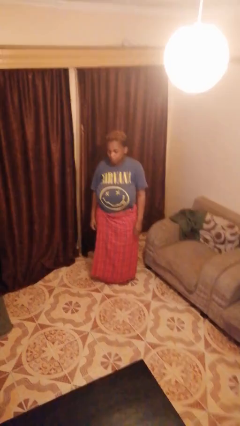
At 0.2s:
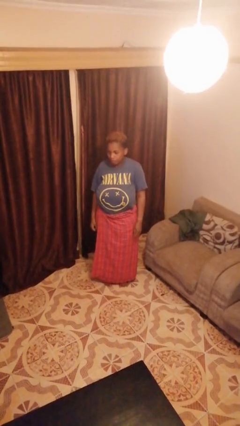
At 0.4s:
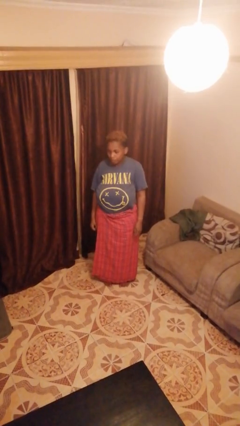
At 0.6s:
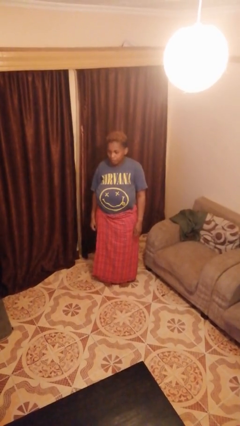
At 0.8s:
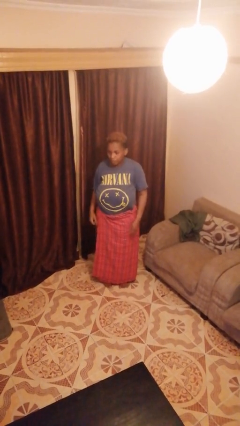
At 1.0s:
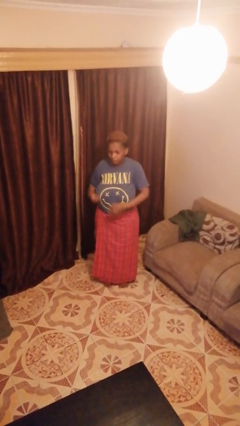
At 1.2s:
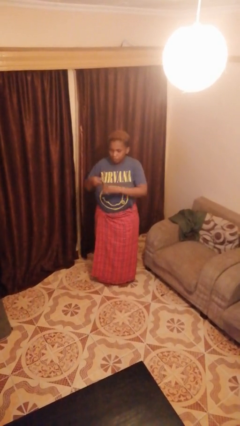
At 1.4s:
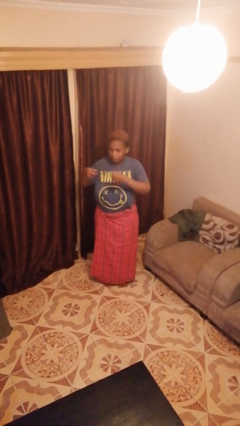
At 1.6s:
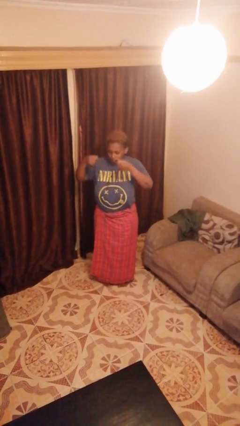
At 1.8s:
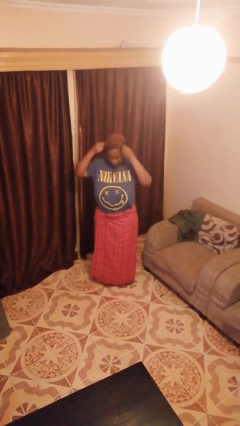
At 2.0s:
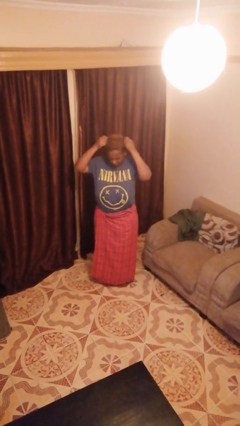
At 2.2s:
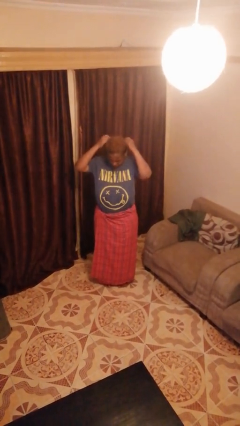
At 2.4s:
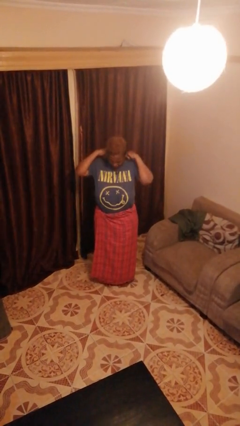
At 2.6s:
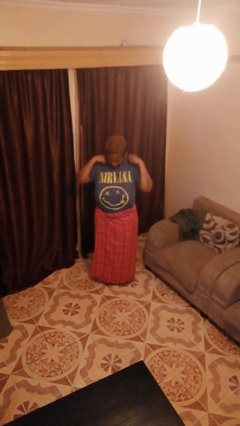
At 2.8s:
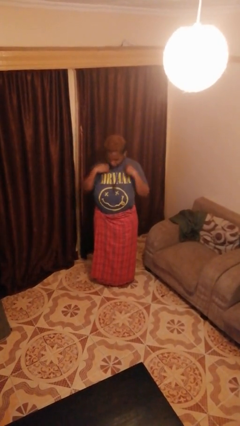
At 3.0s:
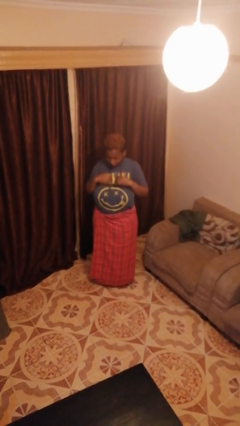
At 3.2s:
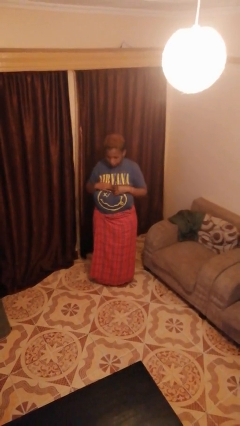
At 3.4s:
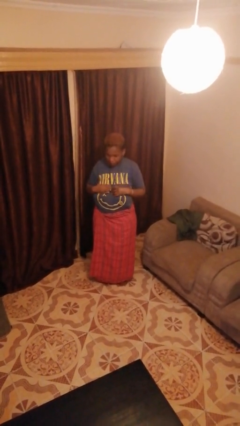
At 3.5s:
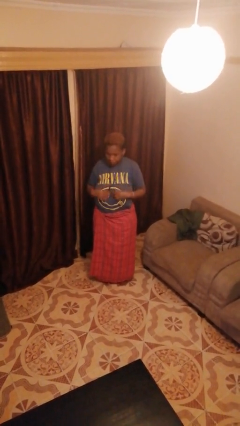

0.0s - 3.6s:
person puts on necklace

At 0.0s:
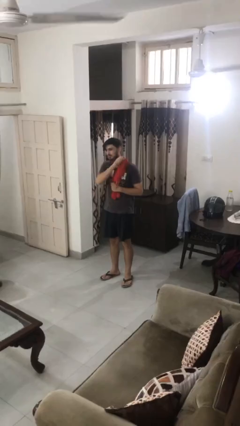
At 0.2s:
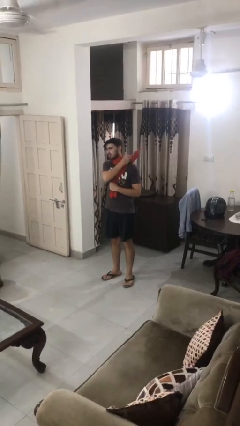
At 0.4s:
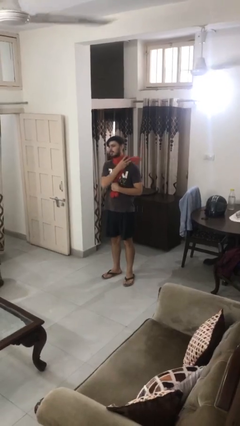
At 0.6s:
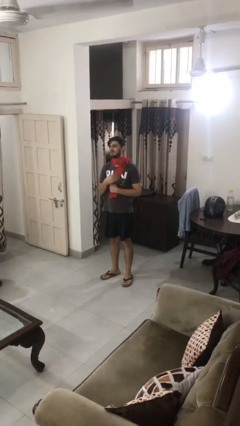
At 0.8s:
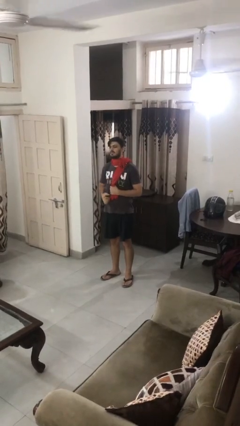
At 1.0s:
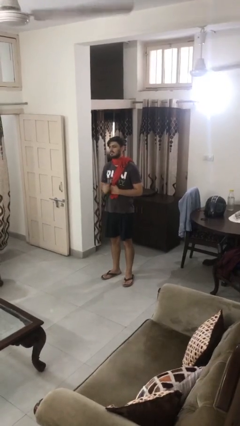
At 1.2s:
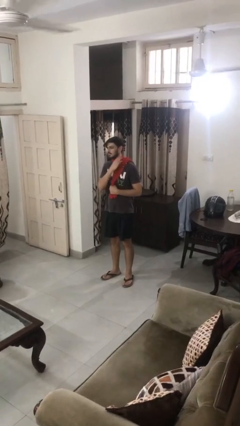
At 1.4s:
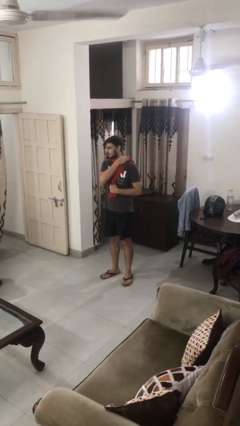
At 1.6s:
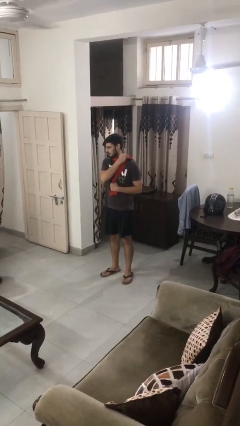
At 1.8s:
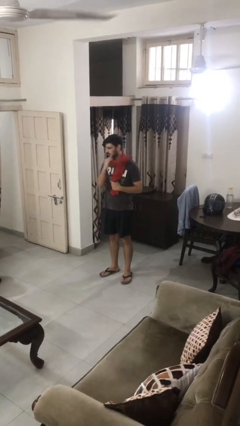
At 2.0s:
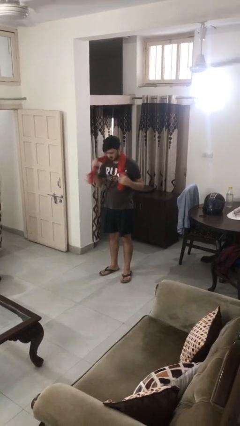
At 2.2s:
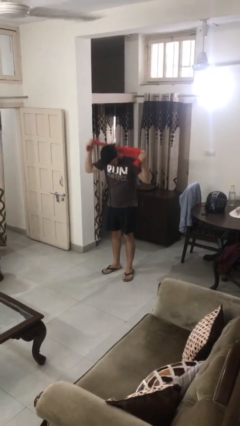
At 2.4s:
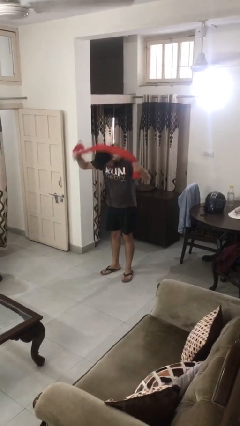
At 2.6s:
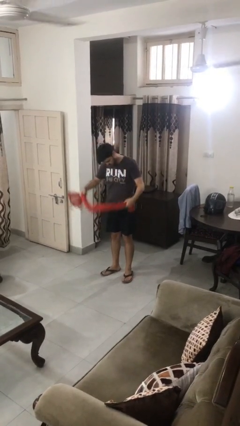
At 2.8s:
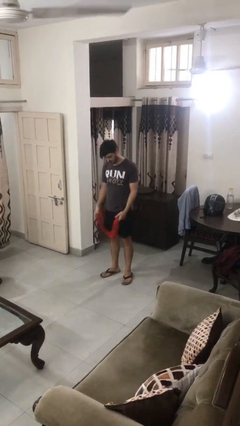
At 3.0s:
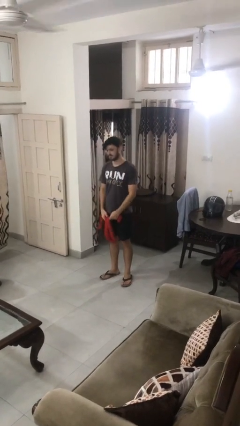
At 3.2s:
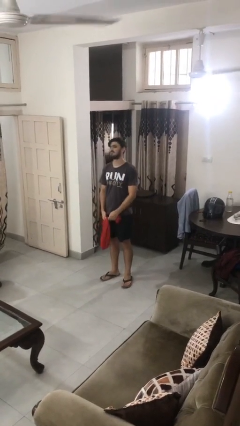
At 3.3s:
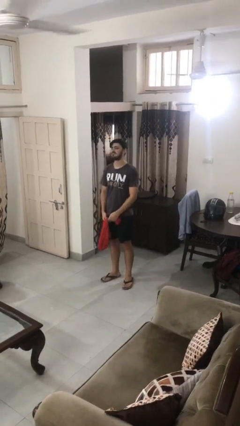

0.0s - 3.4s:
person takes off scarf

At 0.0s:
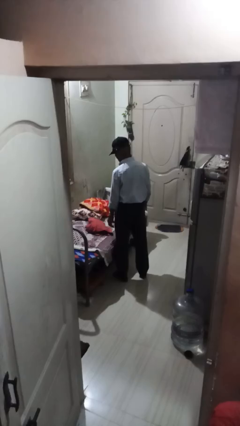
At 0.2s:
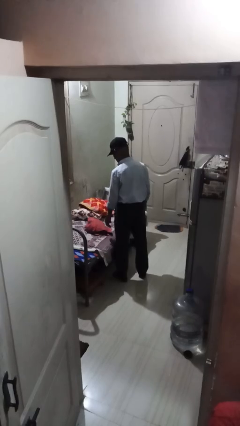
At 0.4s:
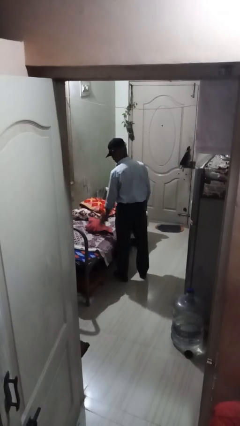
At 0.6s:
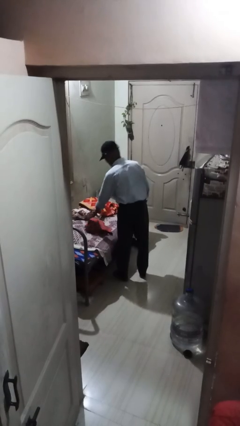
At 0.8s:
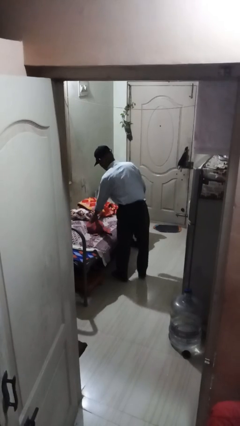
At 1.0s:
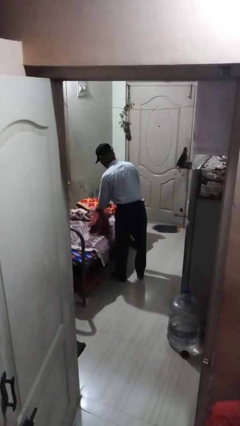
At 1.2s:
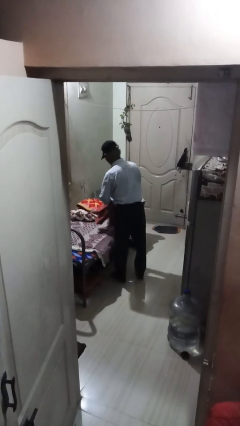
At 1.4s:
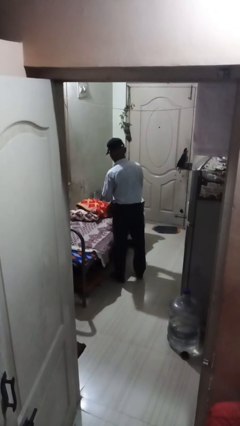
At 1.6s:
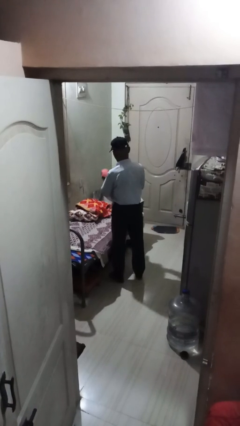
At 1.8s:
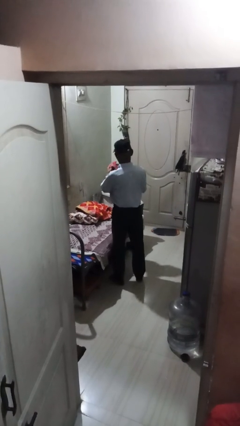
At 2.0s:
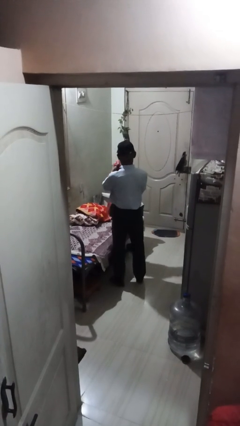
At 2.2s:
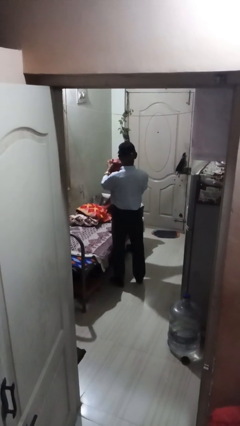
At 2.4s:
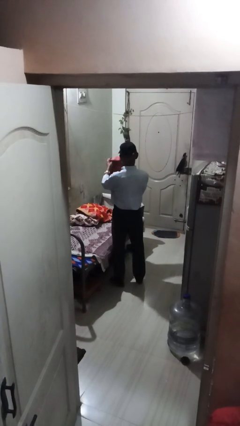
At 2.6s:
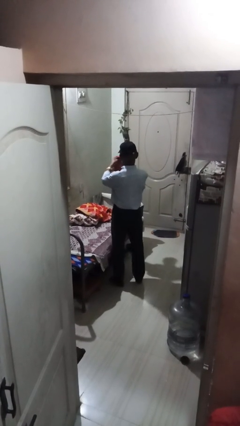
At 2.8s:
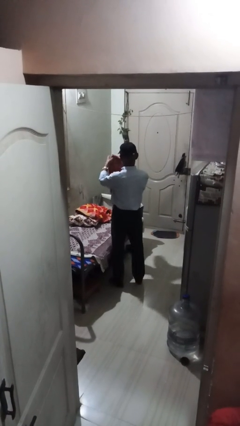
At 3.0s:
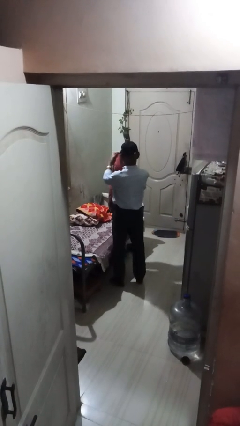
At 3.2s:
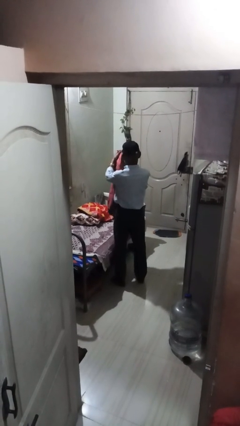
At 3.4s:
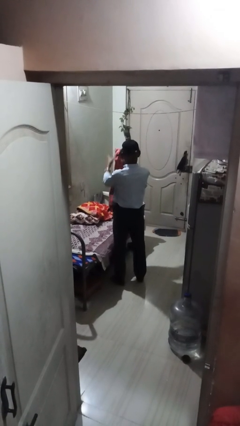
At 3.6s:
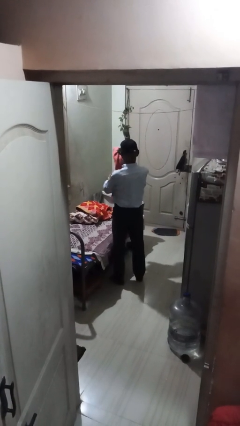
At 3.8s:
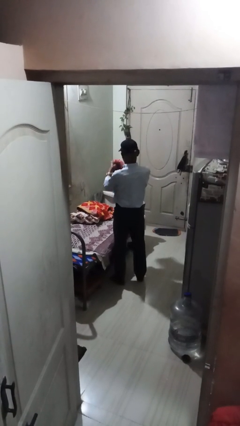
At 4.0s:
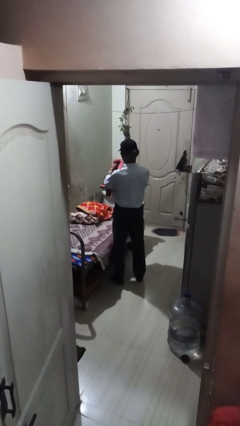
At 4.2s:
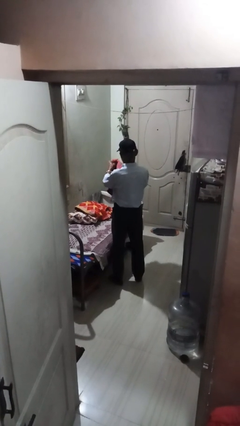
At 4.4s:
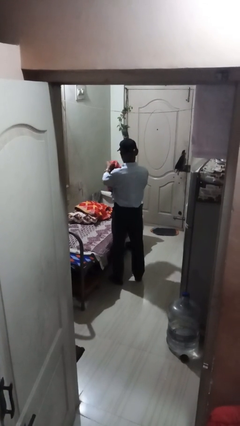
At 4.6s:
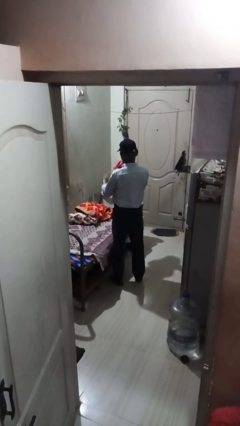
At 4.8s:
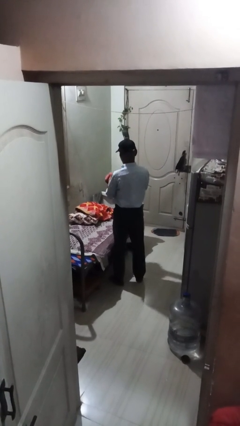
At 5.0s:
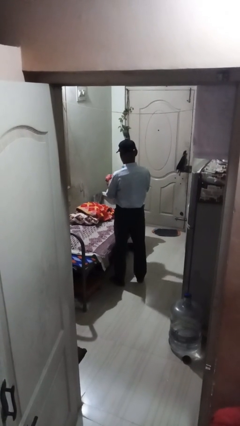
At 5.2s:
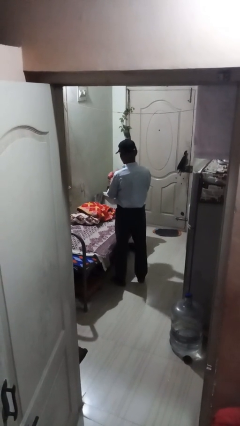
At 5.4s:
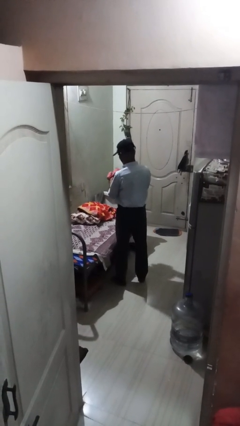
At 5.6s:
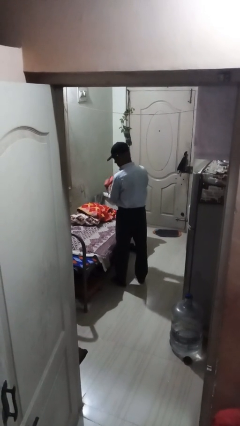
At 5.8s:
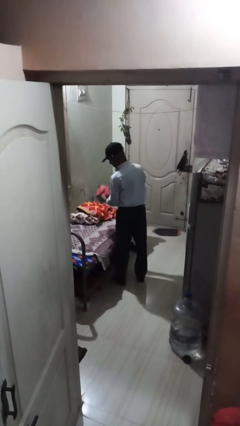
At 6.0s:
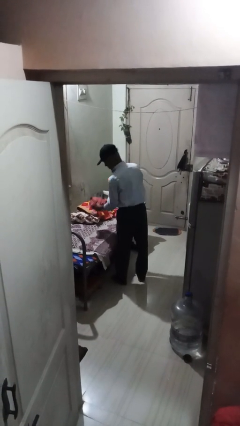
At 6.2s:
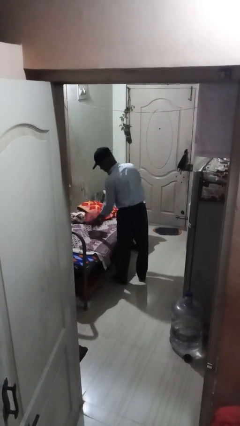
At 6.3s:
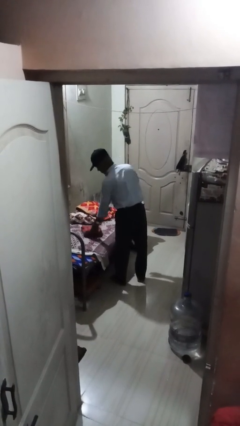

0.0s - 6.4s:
person folds shirt

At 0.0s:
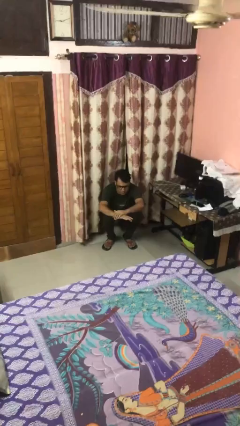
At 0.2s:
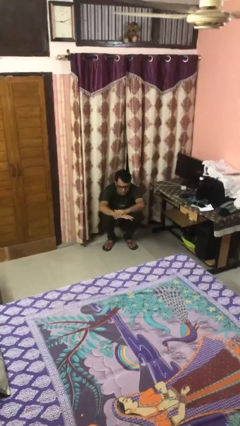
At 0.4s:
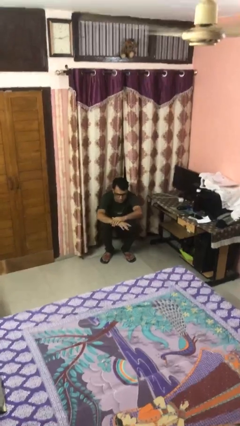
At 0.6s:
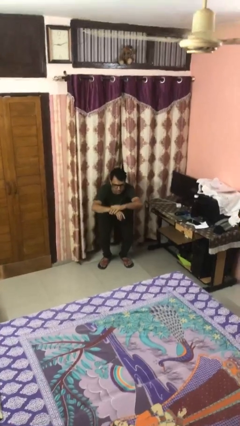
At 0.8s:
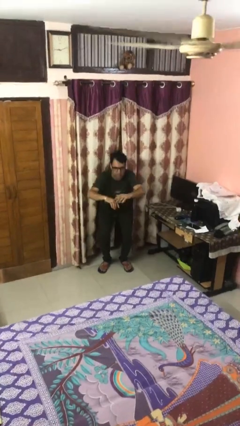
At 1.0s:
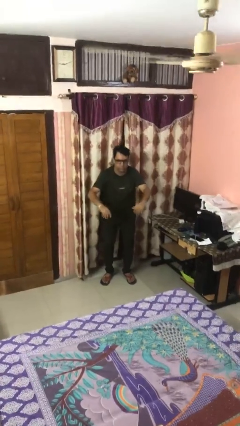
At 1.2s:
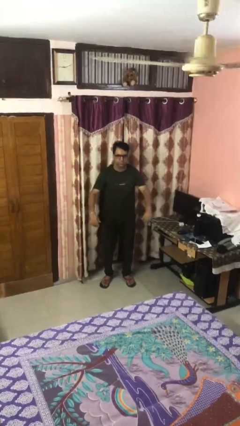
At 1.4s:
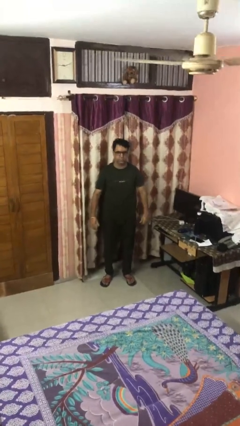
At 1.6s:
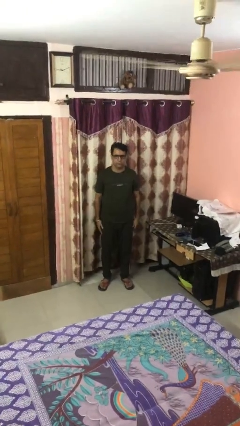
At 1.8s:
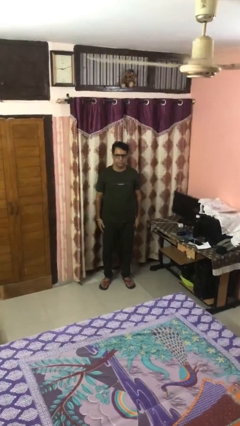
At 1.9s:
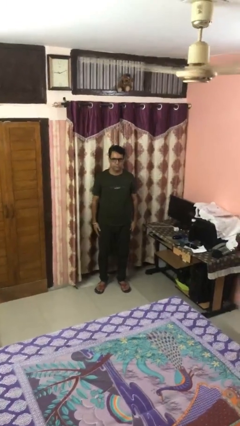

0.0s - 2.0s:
person stands up

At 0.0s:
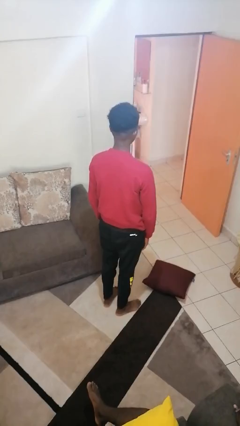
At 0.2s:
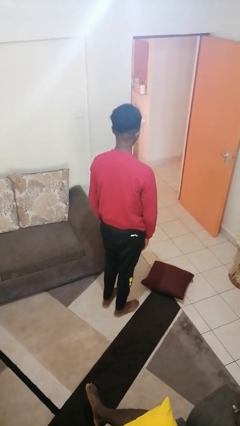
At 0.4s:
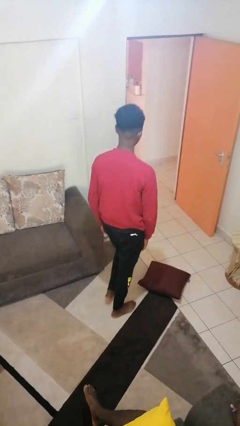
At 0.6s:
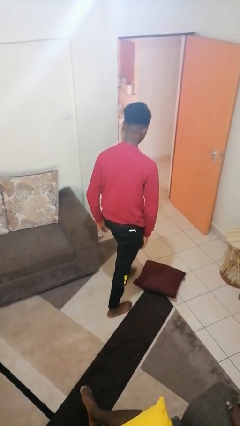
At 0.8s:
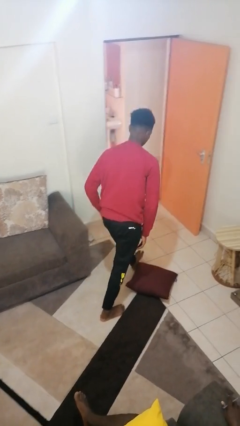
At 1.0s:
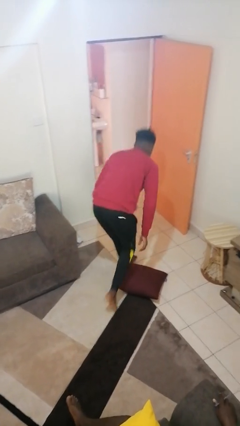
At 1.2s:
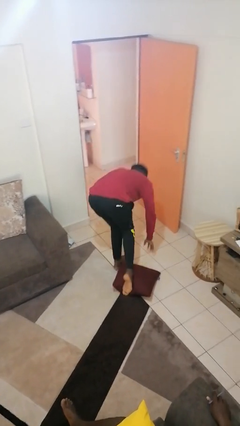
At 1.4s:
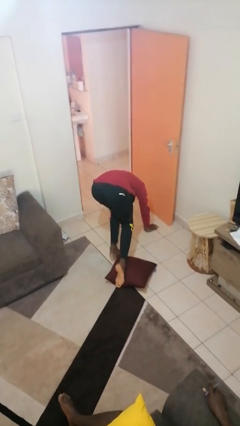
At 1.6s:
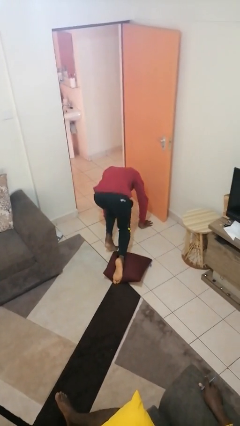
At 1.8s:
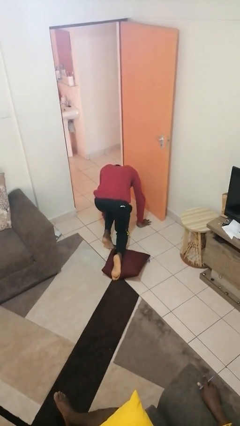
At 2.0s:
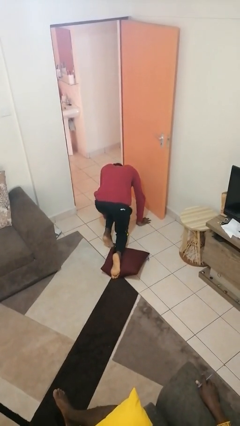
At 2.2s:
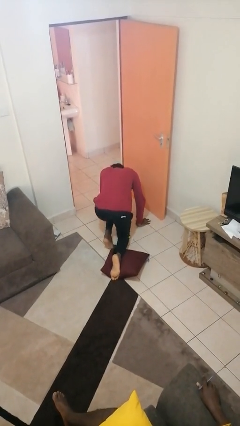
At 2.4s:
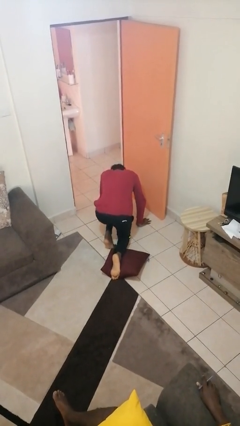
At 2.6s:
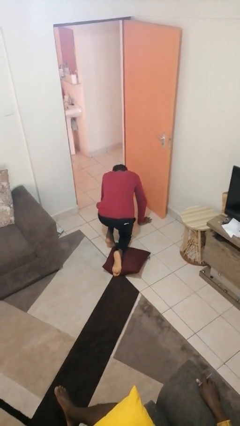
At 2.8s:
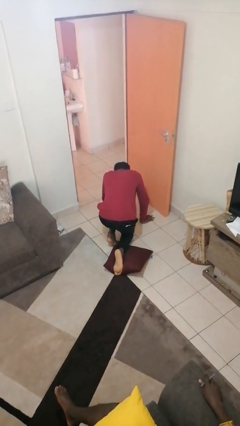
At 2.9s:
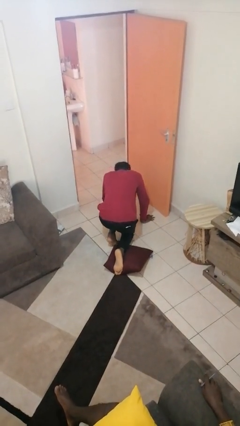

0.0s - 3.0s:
person trips on object on floor
